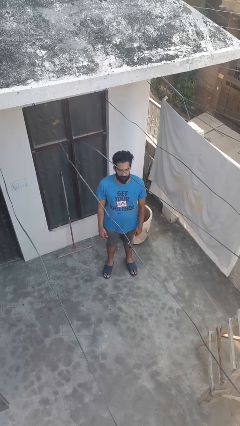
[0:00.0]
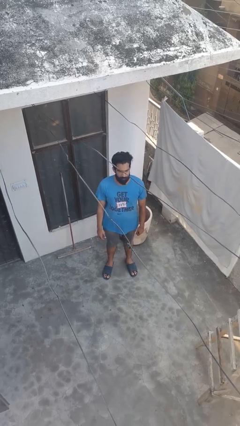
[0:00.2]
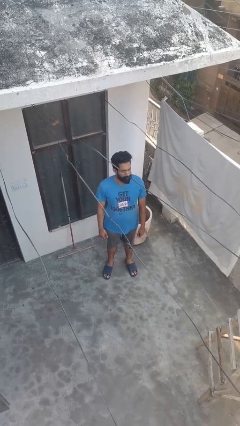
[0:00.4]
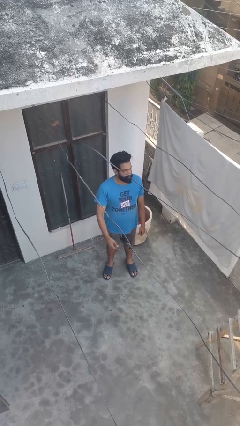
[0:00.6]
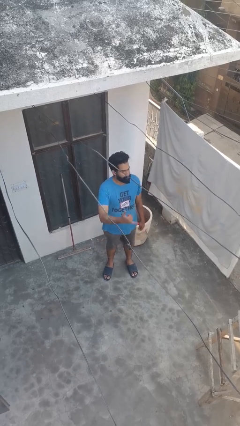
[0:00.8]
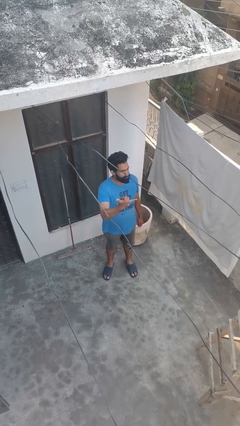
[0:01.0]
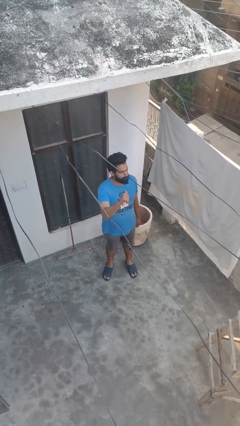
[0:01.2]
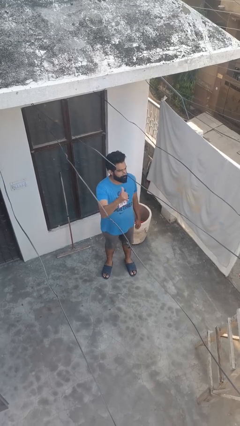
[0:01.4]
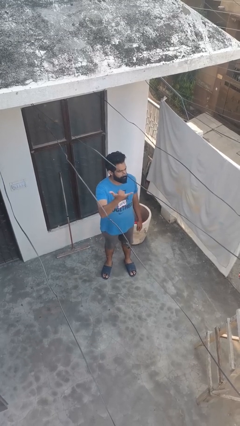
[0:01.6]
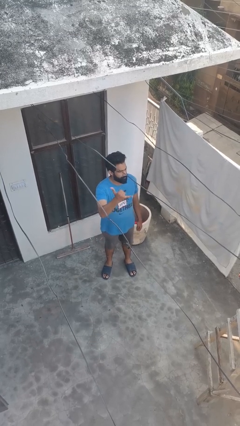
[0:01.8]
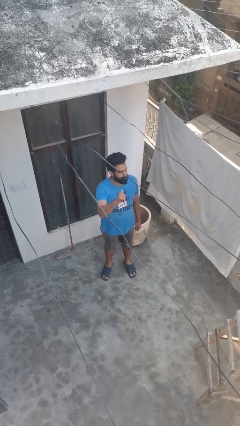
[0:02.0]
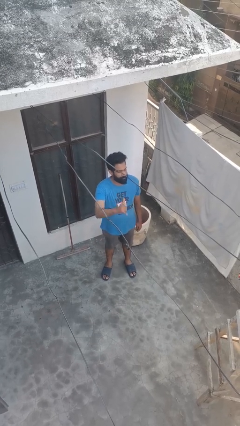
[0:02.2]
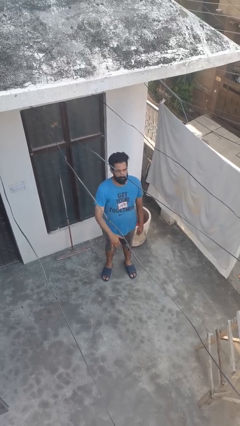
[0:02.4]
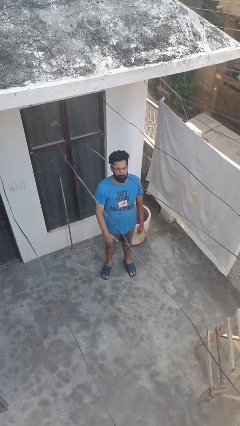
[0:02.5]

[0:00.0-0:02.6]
person gestures hang loose

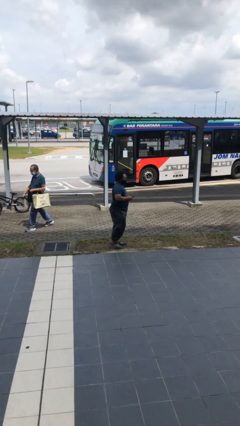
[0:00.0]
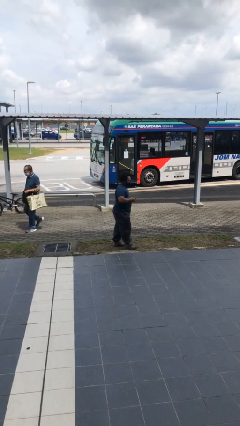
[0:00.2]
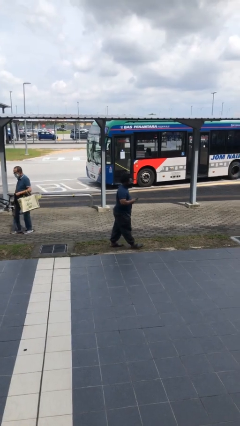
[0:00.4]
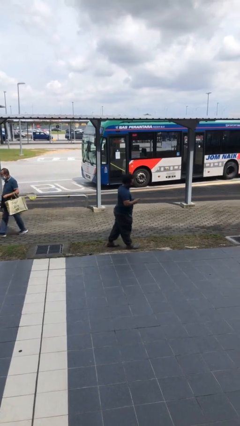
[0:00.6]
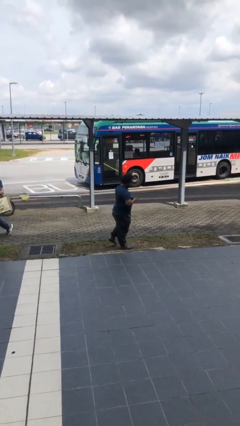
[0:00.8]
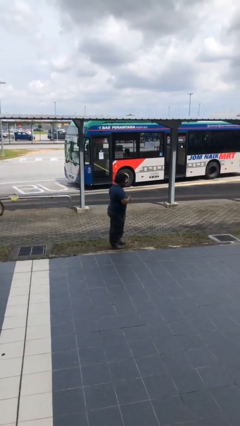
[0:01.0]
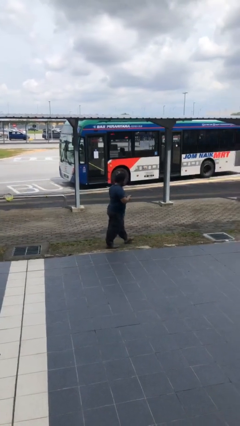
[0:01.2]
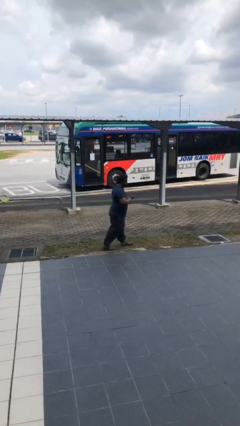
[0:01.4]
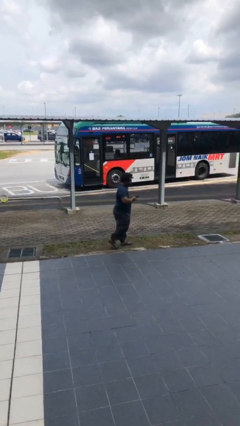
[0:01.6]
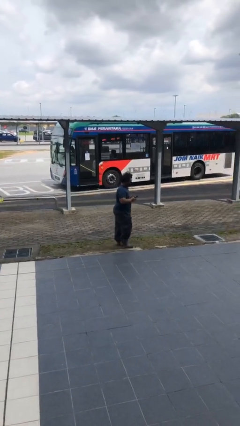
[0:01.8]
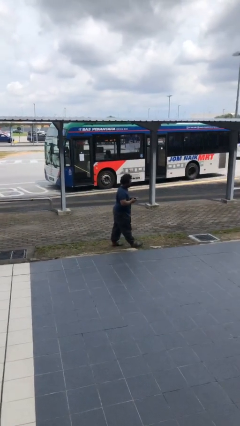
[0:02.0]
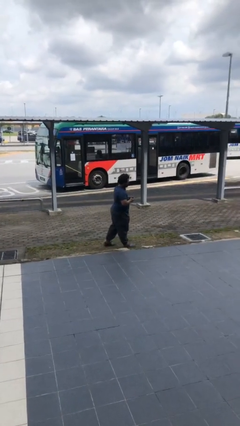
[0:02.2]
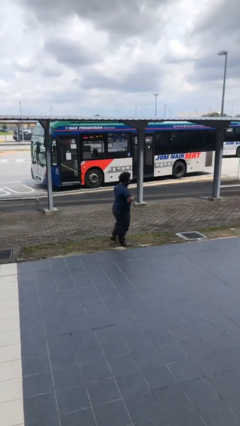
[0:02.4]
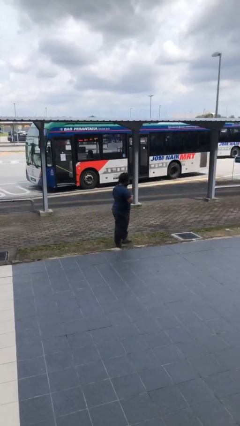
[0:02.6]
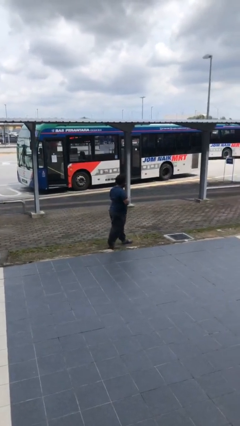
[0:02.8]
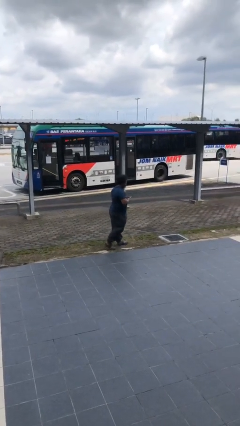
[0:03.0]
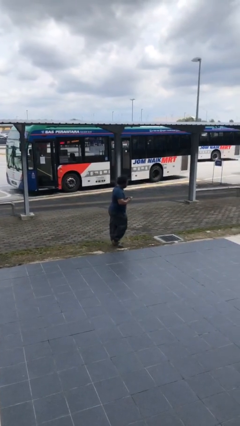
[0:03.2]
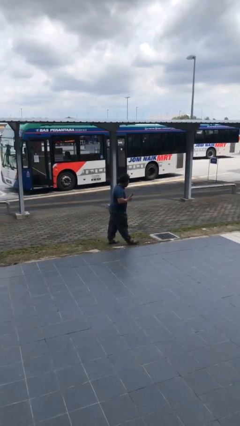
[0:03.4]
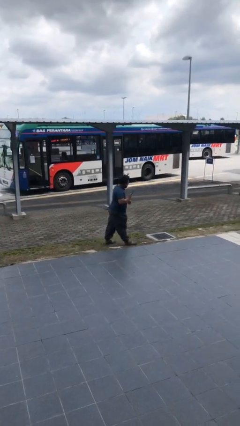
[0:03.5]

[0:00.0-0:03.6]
person texts on phone

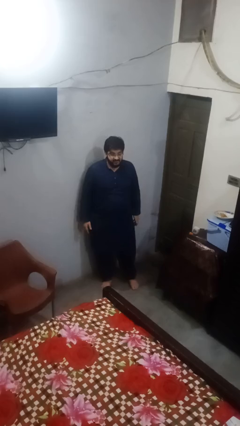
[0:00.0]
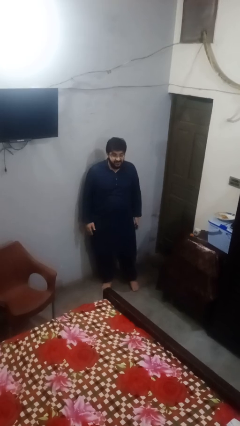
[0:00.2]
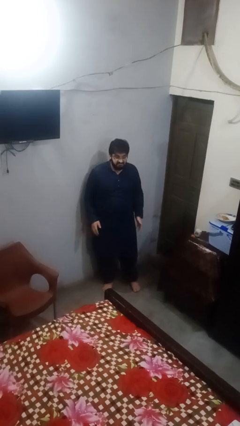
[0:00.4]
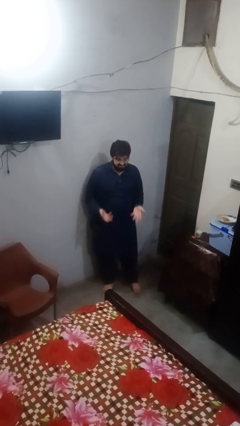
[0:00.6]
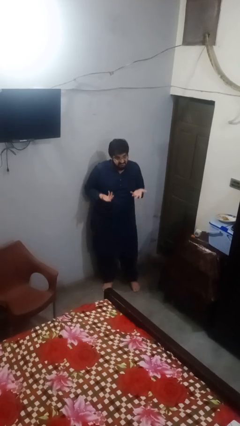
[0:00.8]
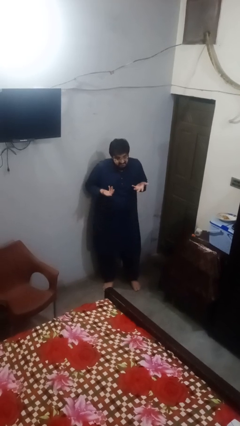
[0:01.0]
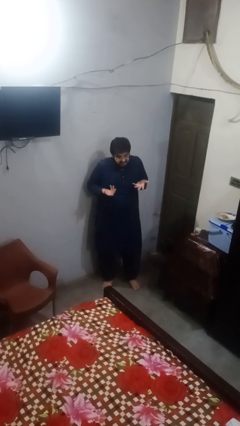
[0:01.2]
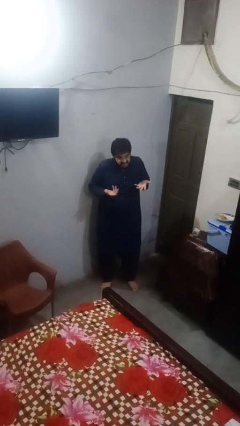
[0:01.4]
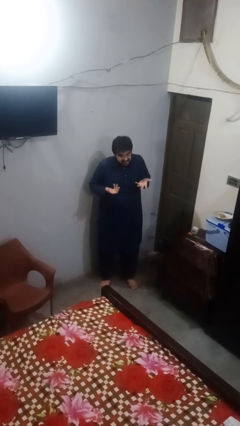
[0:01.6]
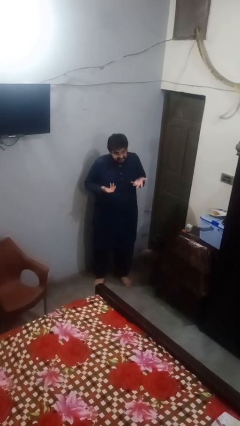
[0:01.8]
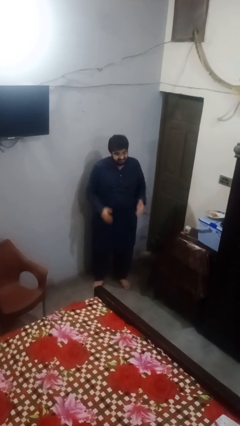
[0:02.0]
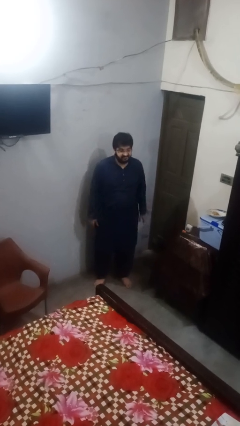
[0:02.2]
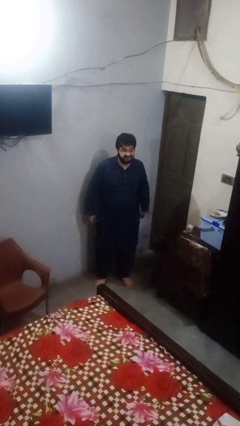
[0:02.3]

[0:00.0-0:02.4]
person shrugs

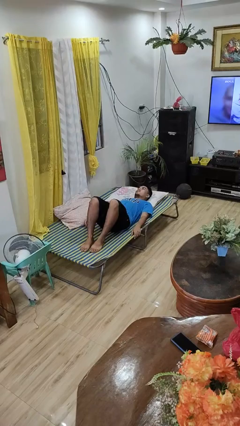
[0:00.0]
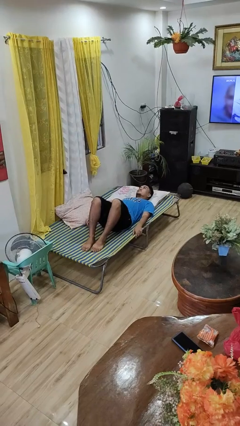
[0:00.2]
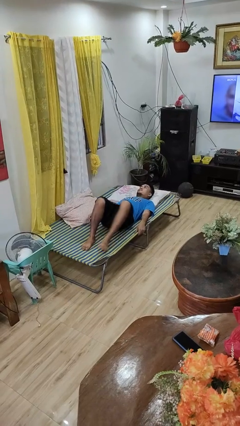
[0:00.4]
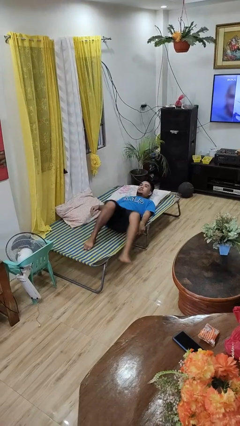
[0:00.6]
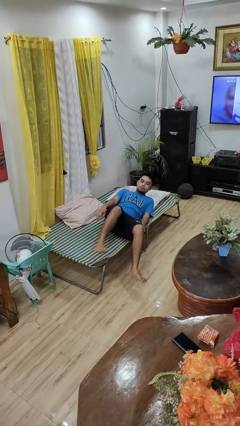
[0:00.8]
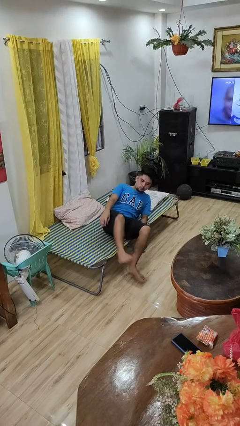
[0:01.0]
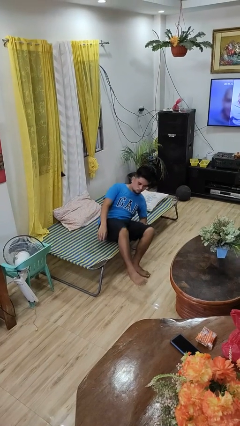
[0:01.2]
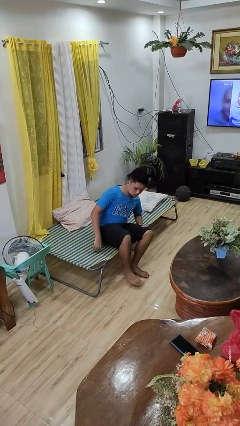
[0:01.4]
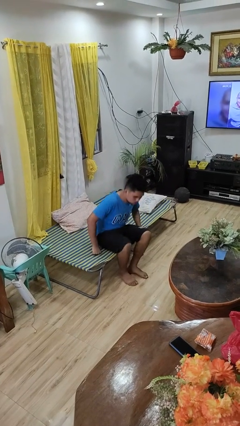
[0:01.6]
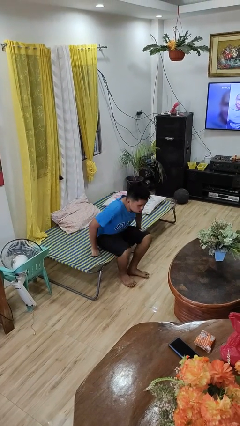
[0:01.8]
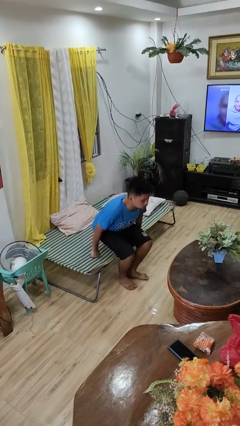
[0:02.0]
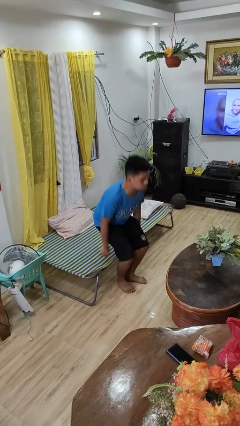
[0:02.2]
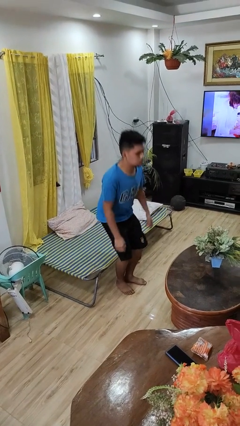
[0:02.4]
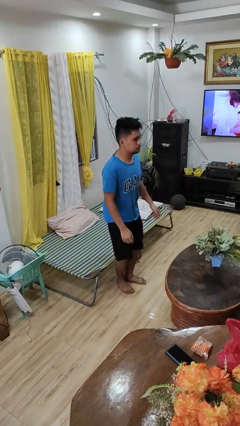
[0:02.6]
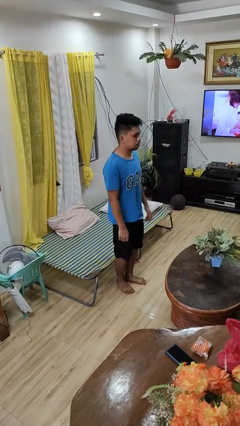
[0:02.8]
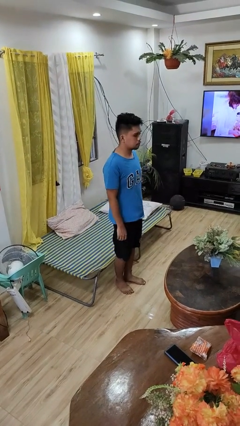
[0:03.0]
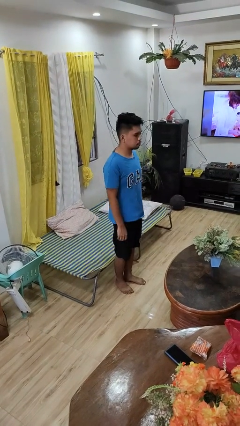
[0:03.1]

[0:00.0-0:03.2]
person stands up

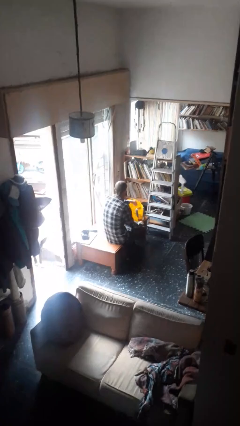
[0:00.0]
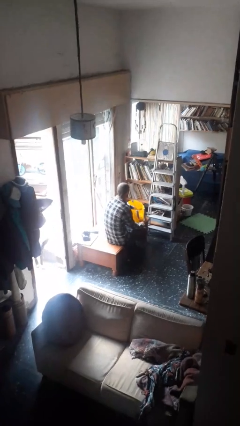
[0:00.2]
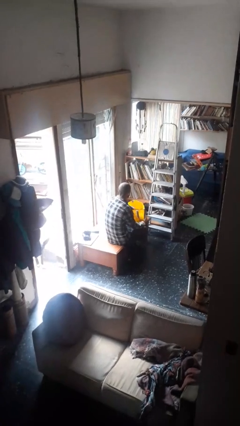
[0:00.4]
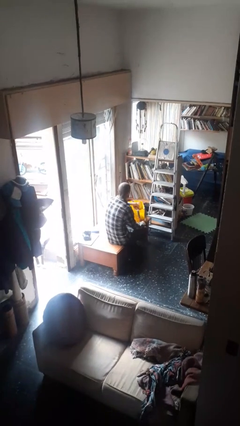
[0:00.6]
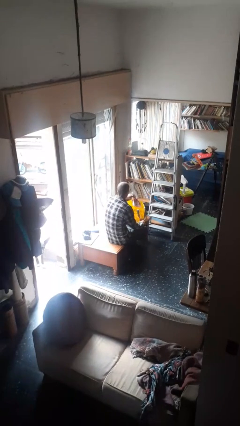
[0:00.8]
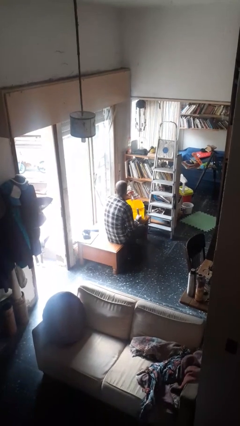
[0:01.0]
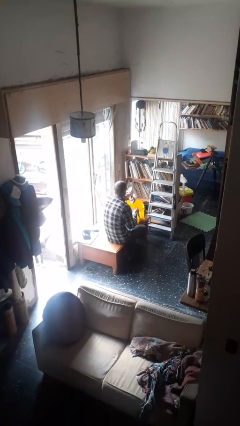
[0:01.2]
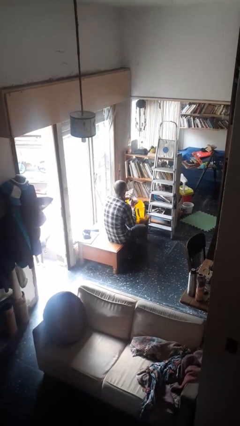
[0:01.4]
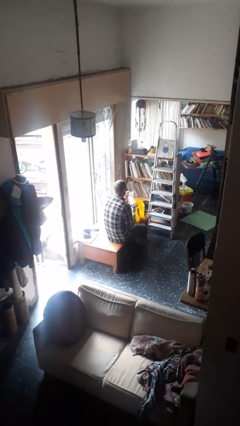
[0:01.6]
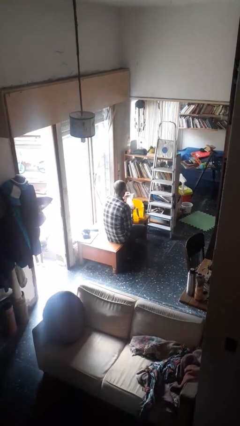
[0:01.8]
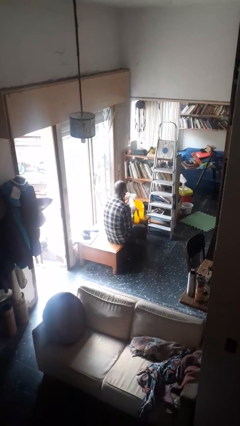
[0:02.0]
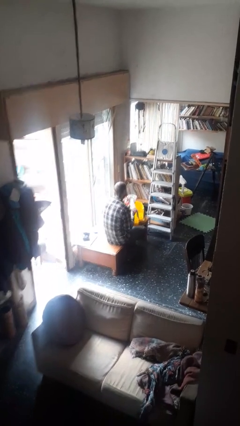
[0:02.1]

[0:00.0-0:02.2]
person takes object from bag

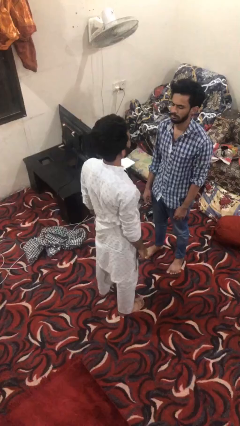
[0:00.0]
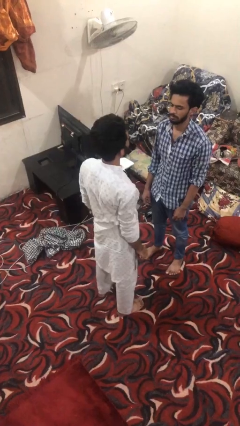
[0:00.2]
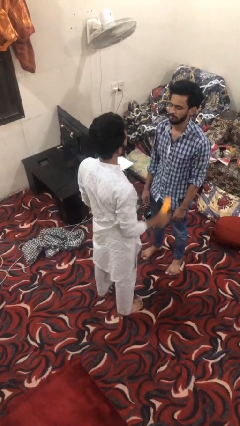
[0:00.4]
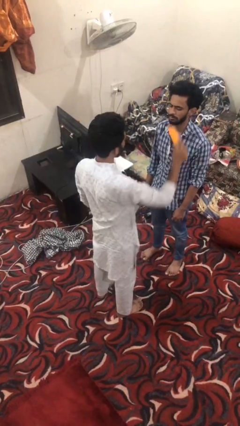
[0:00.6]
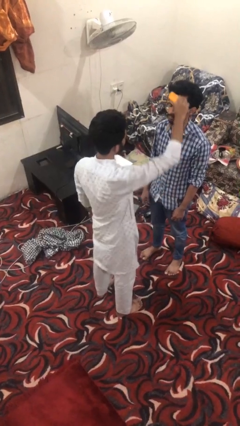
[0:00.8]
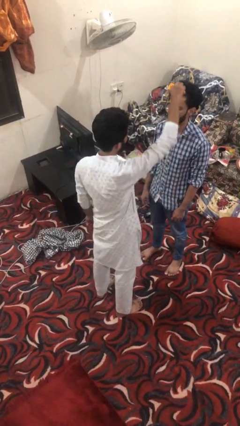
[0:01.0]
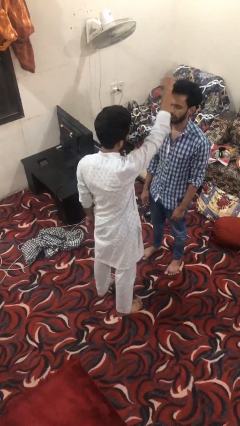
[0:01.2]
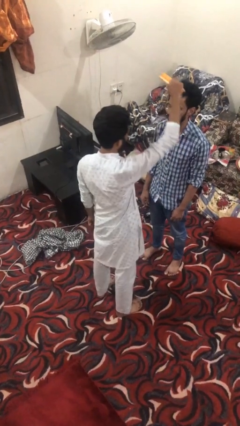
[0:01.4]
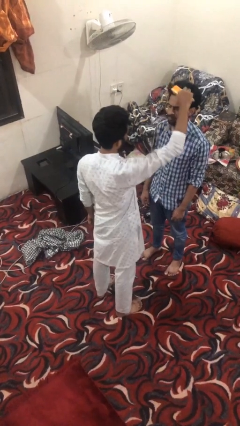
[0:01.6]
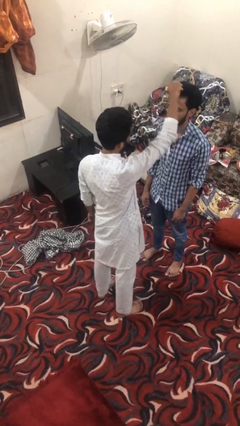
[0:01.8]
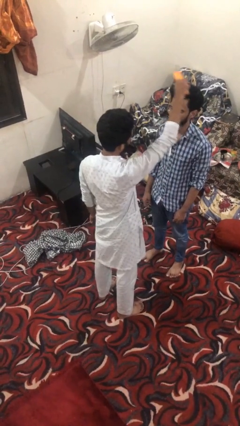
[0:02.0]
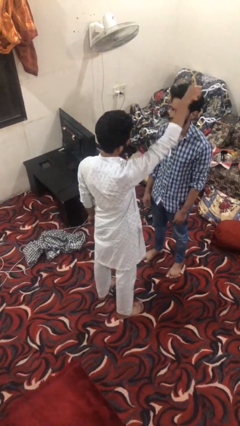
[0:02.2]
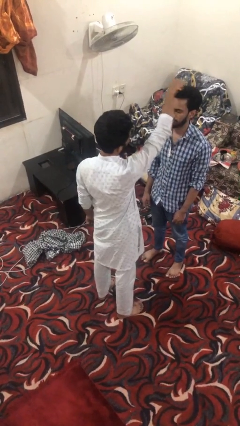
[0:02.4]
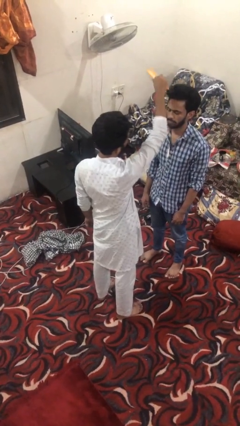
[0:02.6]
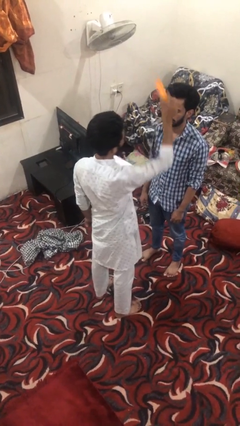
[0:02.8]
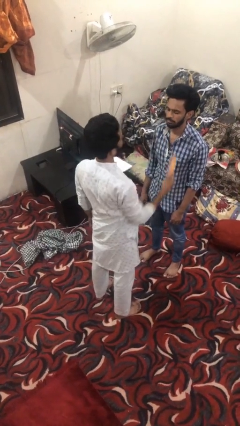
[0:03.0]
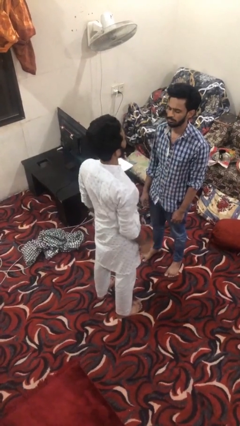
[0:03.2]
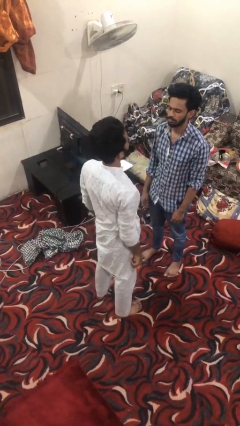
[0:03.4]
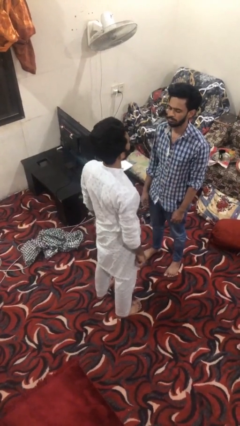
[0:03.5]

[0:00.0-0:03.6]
person brushes hair of person
